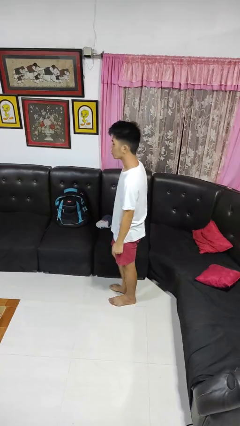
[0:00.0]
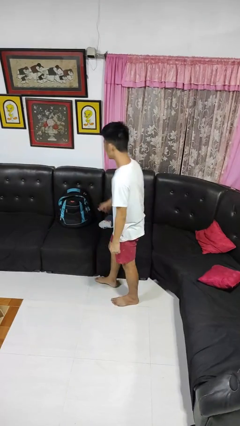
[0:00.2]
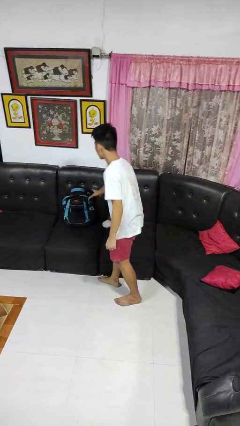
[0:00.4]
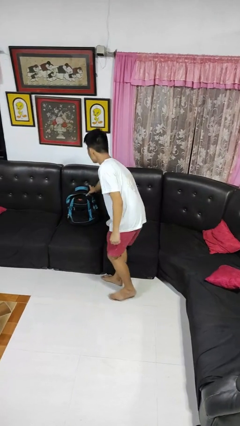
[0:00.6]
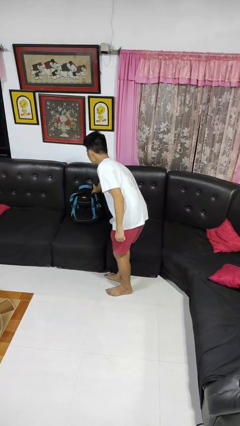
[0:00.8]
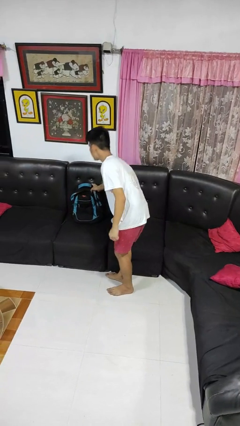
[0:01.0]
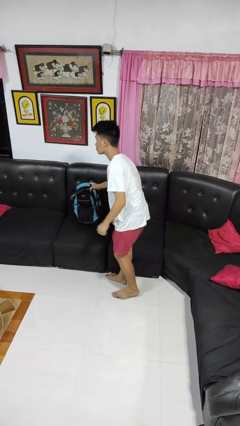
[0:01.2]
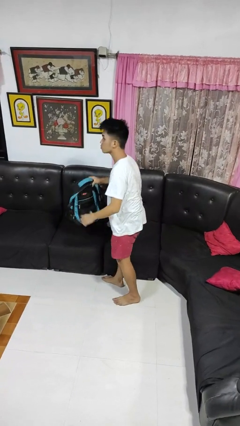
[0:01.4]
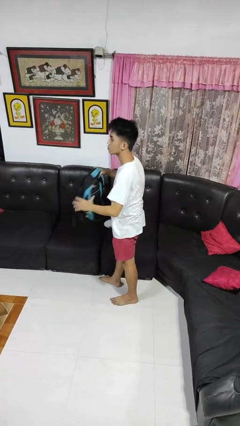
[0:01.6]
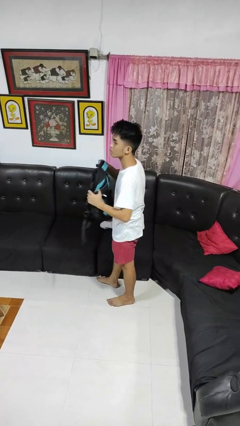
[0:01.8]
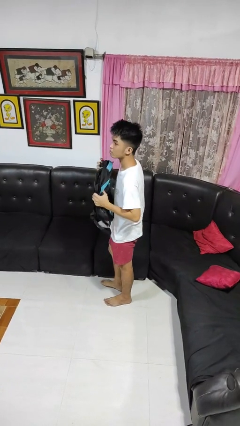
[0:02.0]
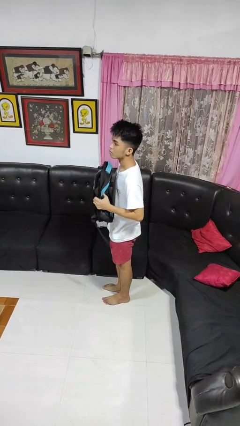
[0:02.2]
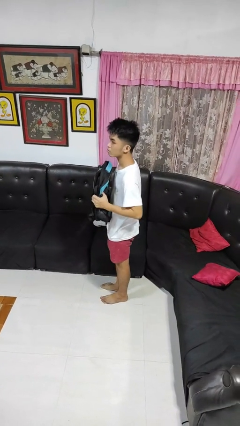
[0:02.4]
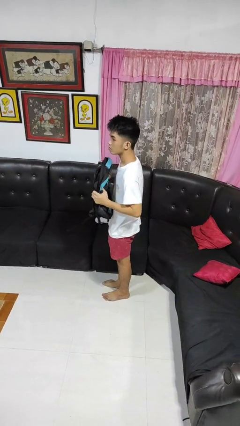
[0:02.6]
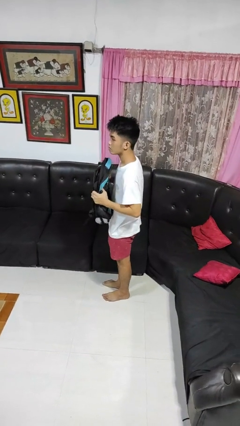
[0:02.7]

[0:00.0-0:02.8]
person picks up object from couch

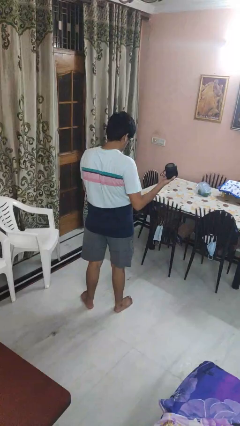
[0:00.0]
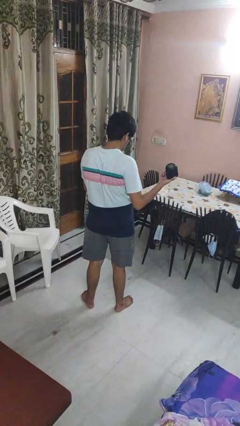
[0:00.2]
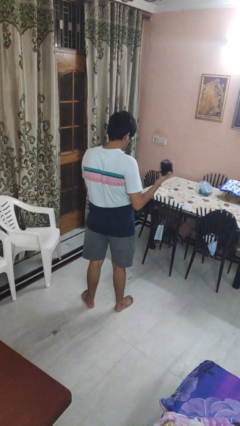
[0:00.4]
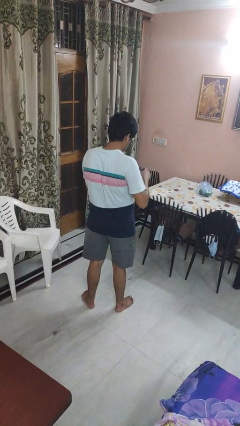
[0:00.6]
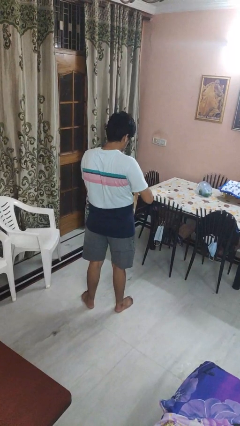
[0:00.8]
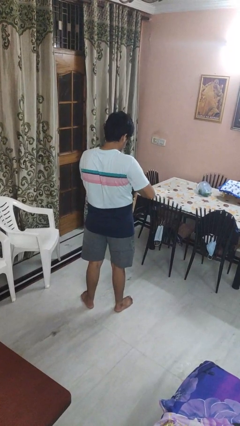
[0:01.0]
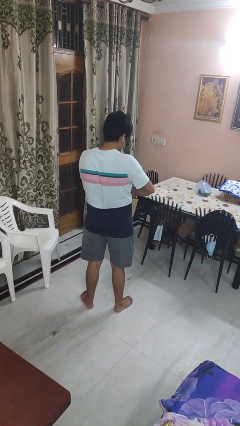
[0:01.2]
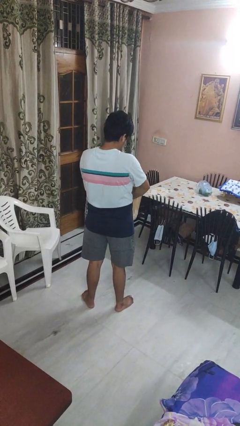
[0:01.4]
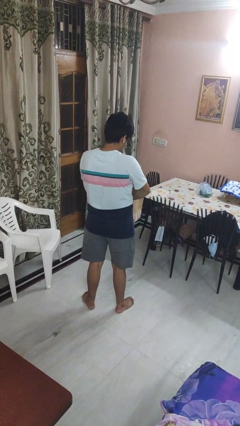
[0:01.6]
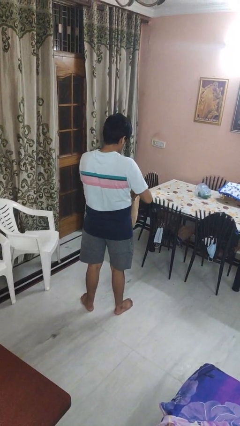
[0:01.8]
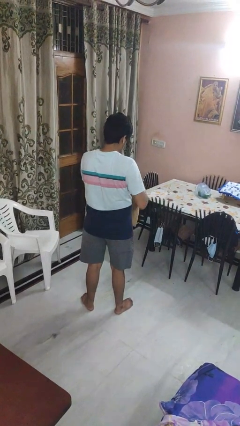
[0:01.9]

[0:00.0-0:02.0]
person puts object into bag

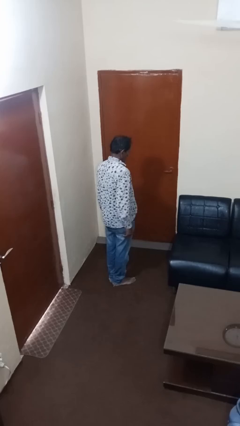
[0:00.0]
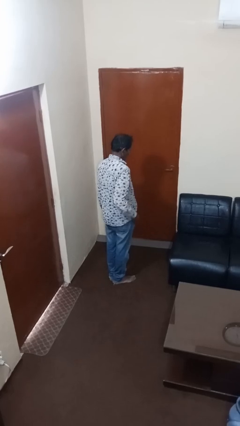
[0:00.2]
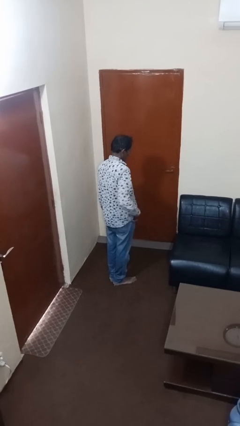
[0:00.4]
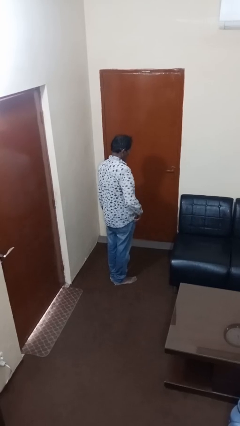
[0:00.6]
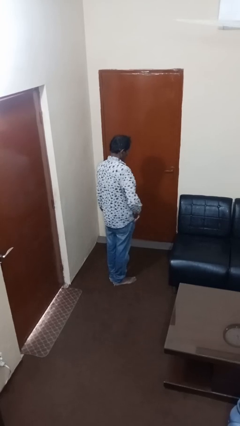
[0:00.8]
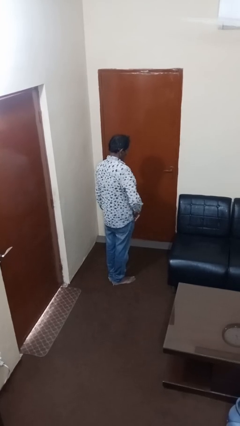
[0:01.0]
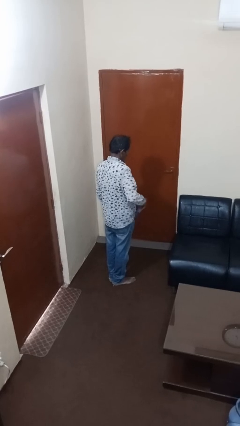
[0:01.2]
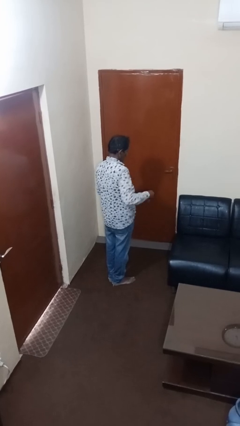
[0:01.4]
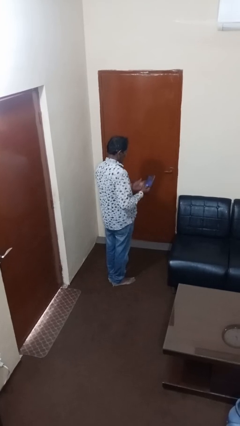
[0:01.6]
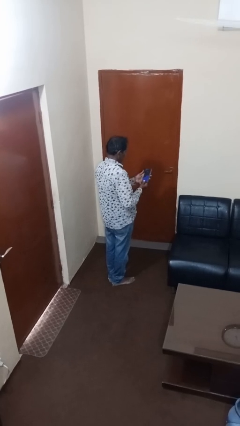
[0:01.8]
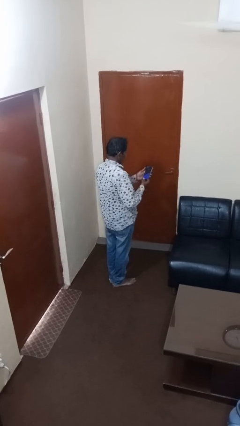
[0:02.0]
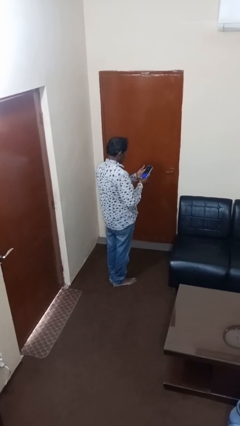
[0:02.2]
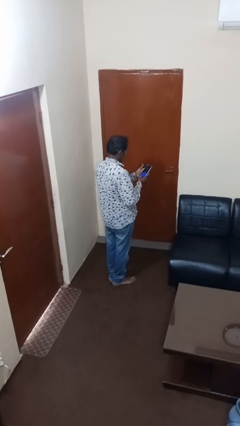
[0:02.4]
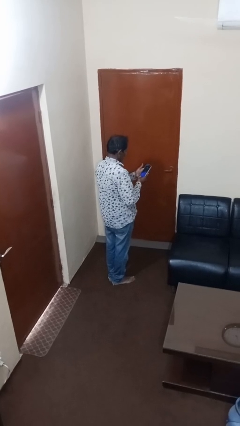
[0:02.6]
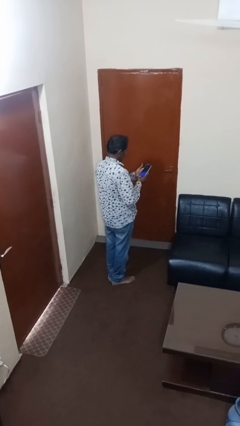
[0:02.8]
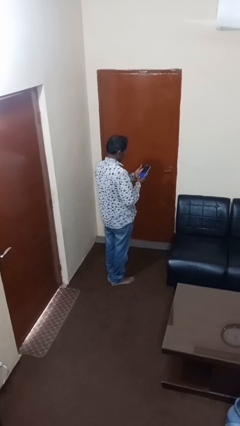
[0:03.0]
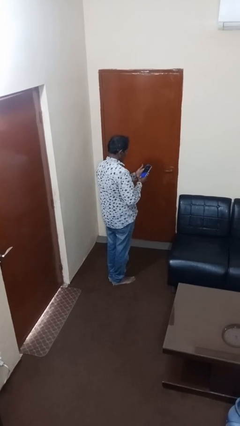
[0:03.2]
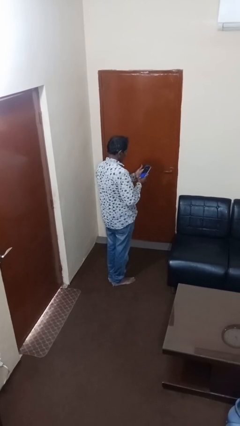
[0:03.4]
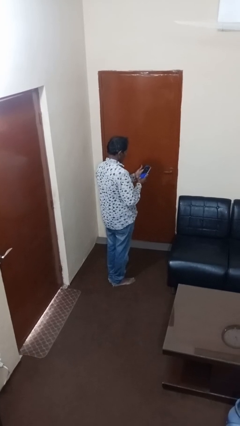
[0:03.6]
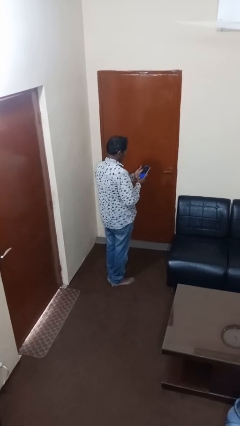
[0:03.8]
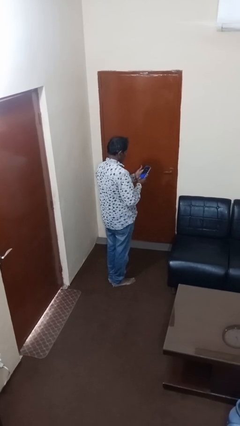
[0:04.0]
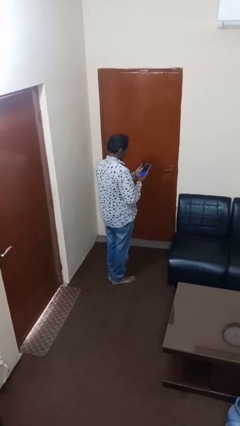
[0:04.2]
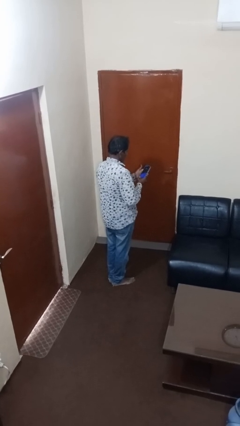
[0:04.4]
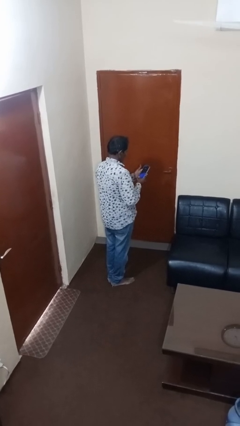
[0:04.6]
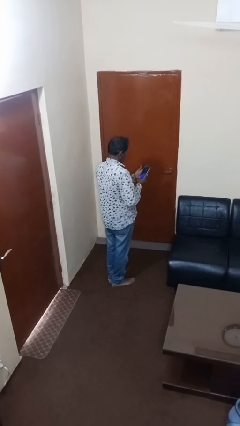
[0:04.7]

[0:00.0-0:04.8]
person takes phone from pocket

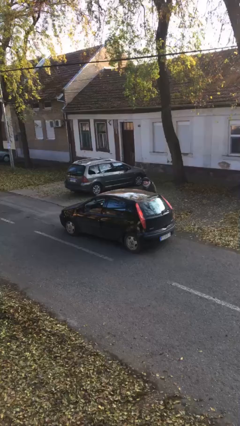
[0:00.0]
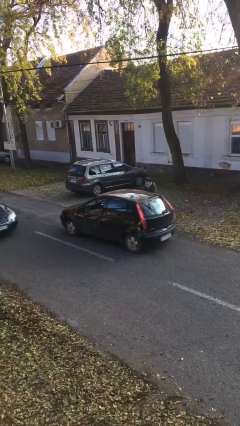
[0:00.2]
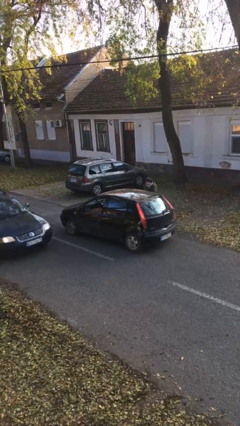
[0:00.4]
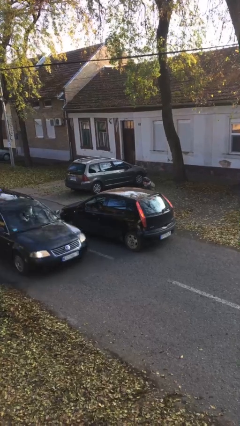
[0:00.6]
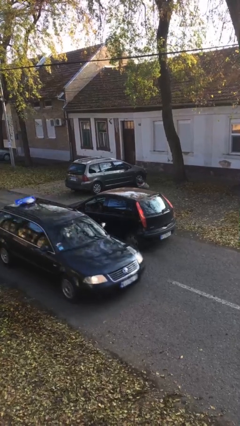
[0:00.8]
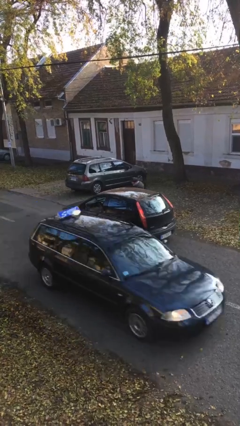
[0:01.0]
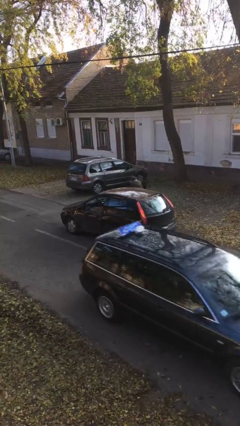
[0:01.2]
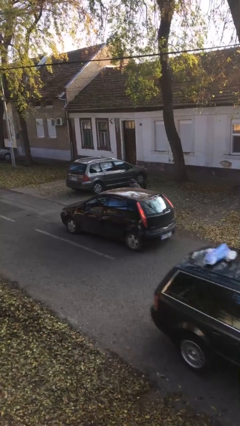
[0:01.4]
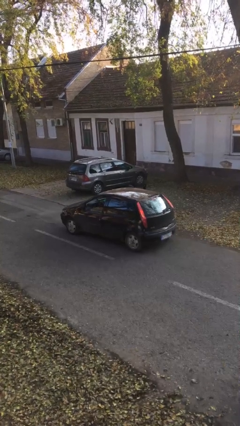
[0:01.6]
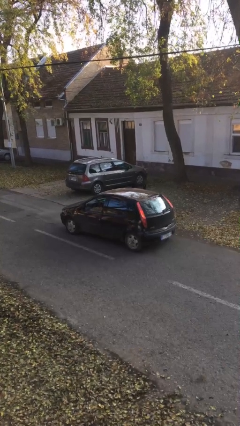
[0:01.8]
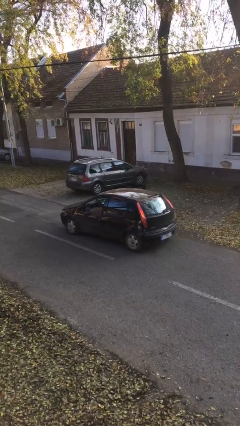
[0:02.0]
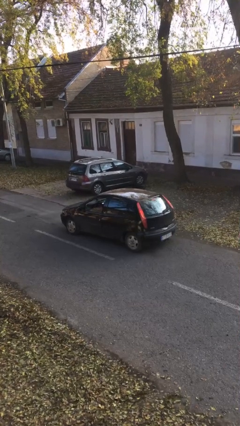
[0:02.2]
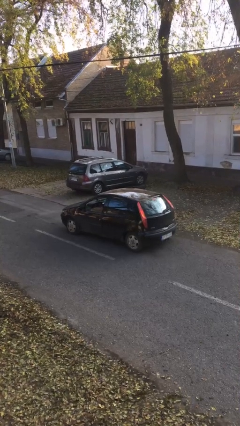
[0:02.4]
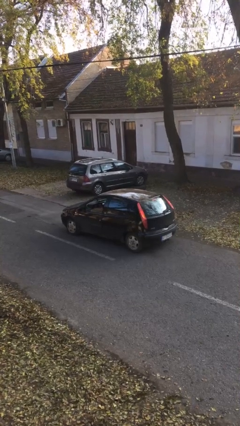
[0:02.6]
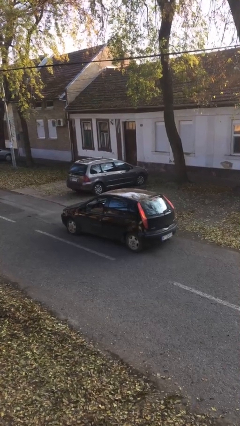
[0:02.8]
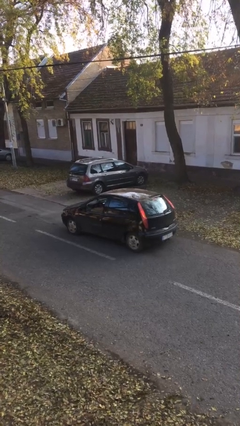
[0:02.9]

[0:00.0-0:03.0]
car picks up person

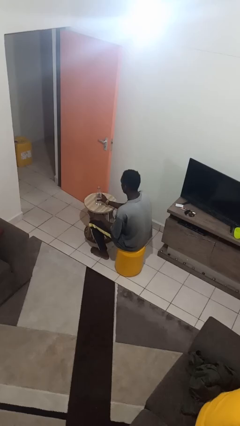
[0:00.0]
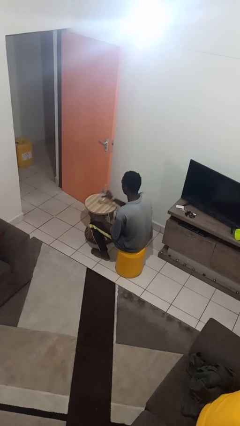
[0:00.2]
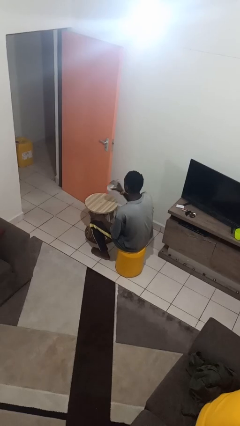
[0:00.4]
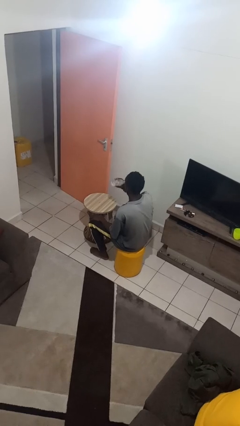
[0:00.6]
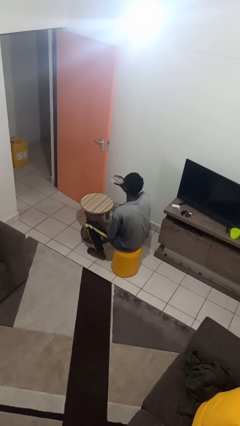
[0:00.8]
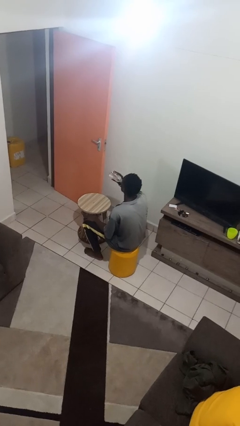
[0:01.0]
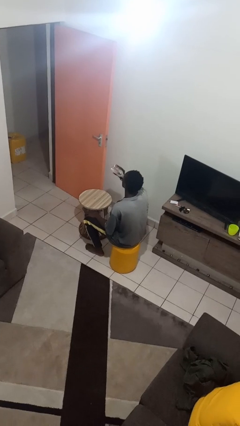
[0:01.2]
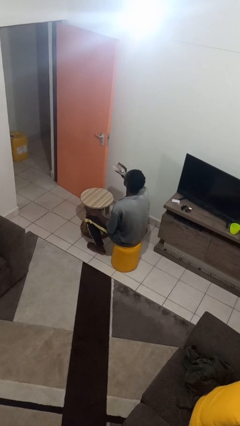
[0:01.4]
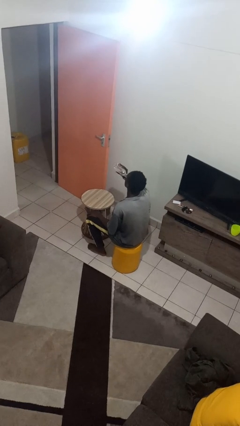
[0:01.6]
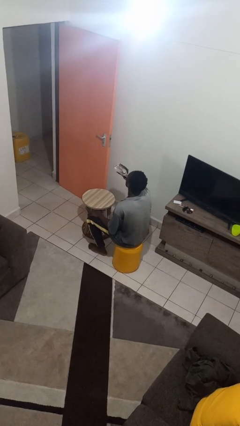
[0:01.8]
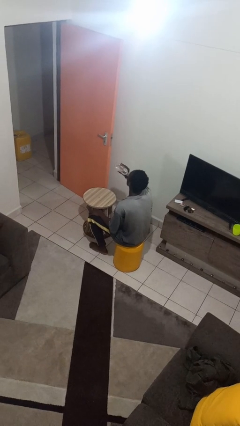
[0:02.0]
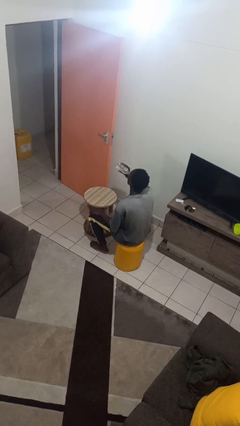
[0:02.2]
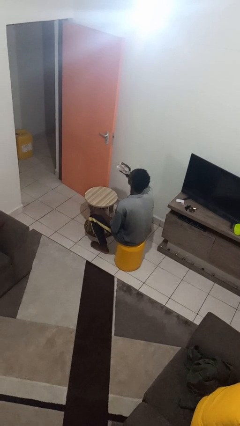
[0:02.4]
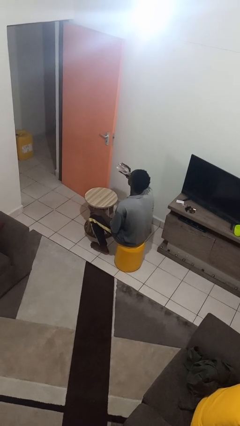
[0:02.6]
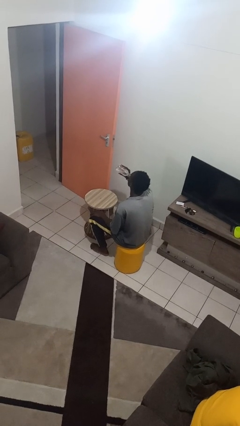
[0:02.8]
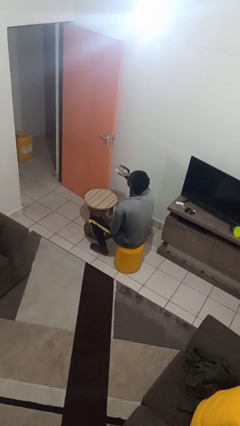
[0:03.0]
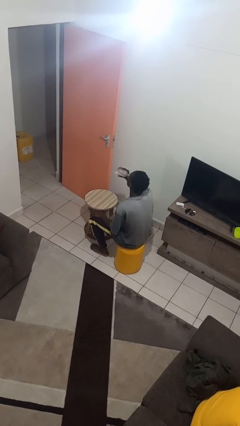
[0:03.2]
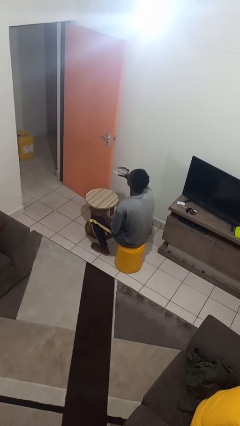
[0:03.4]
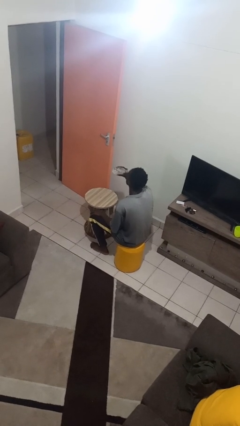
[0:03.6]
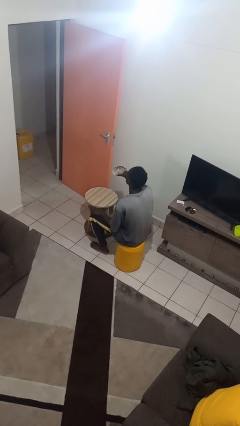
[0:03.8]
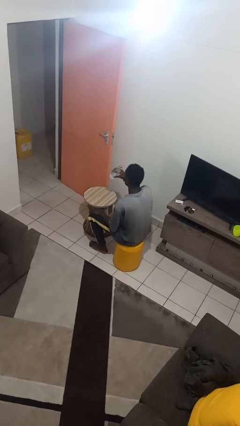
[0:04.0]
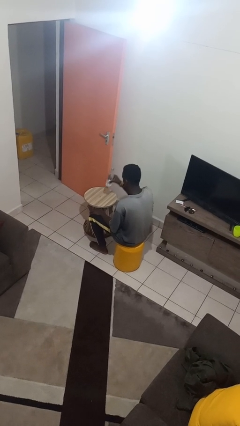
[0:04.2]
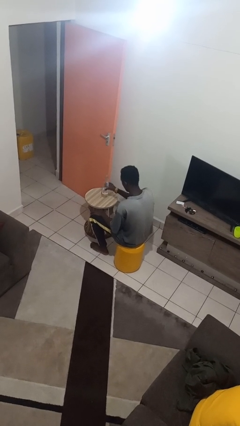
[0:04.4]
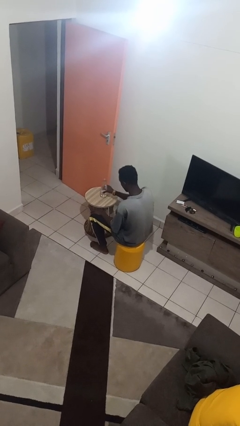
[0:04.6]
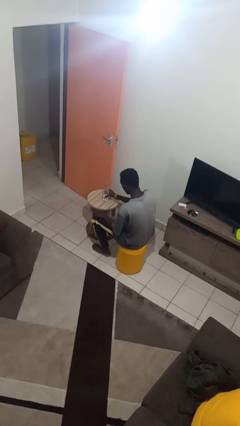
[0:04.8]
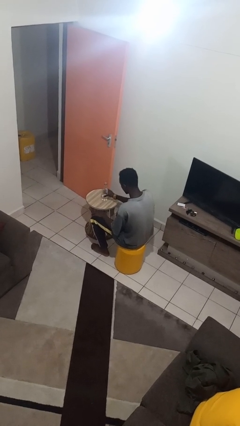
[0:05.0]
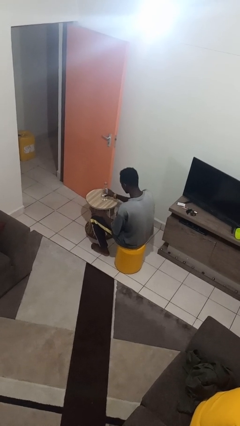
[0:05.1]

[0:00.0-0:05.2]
person drinks from bottle
